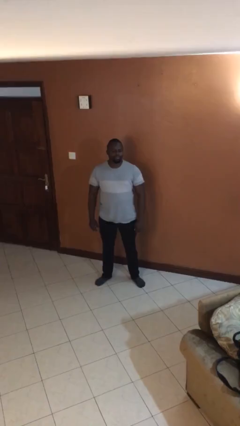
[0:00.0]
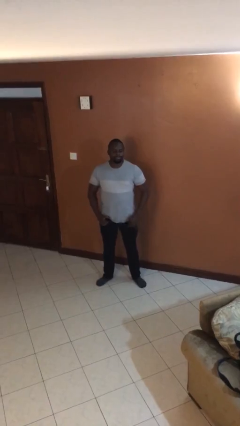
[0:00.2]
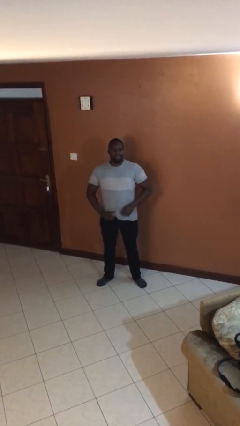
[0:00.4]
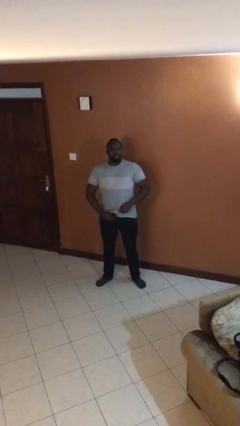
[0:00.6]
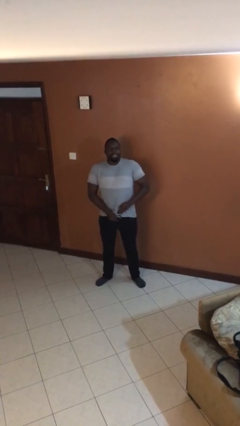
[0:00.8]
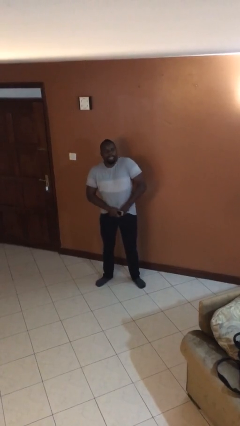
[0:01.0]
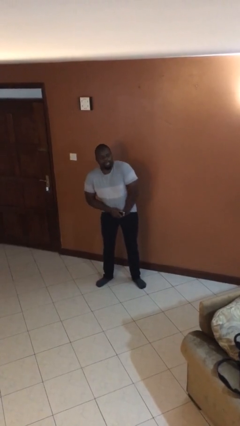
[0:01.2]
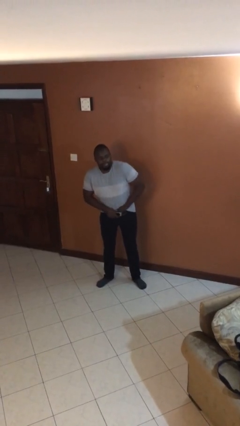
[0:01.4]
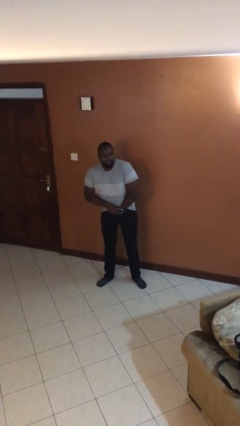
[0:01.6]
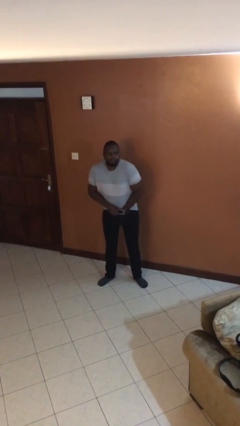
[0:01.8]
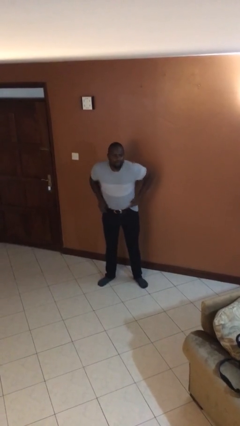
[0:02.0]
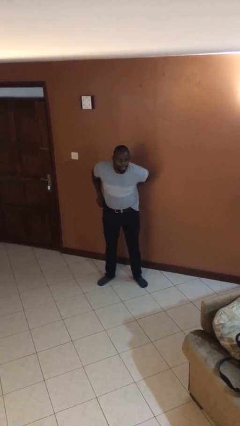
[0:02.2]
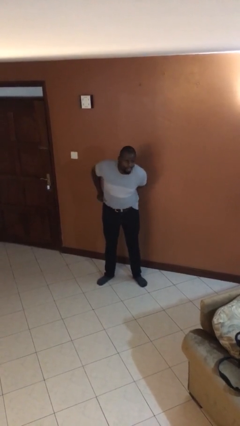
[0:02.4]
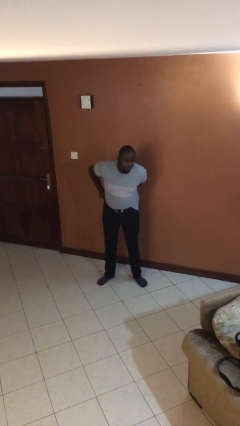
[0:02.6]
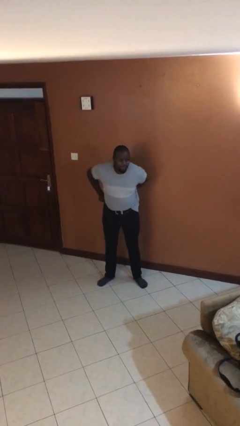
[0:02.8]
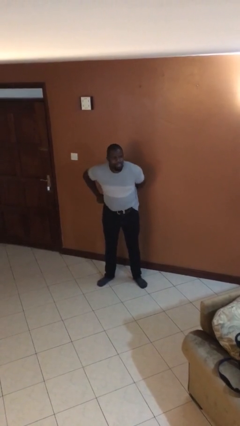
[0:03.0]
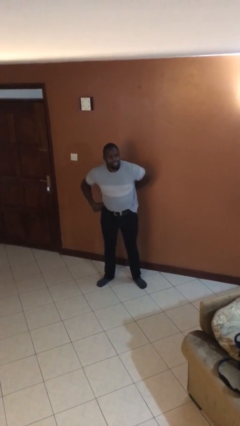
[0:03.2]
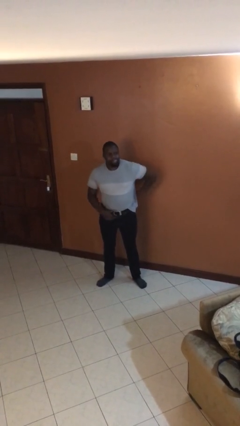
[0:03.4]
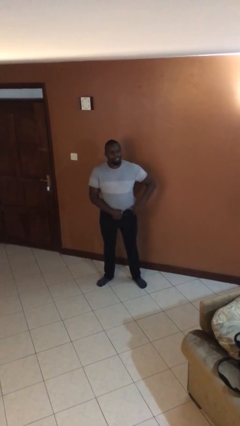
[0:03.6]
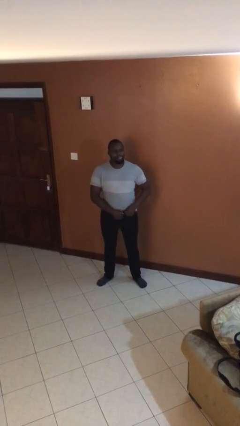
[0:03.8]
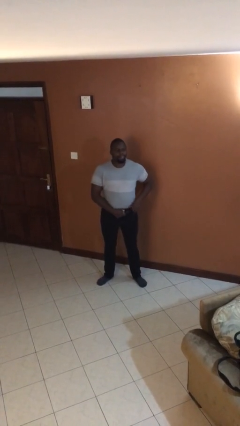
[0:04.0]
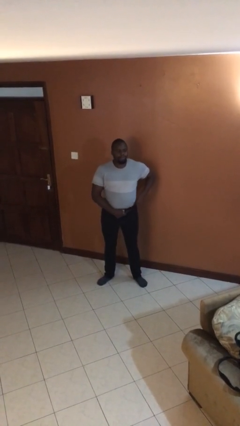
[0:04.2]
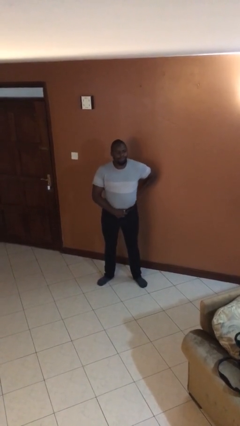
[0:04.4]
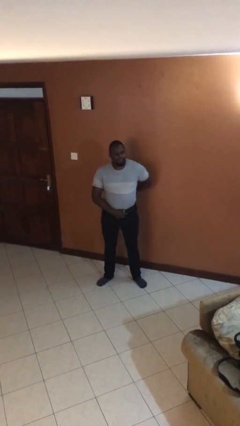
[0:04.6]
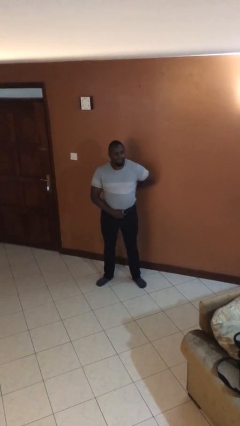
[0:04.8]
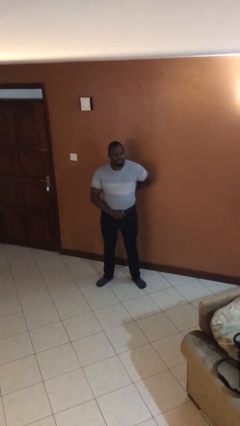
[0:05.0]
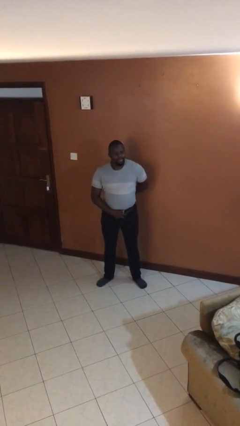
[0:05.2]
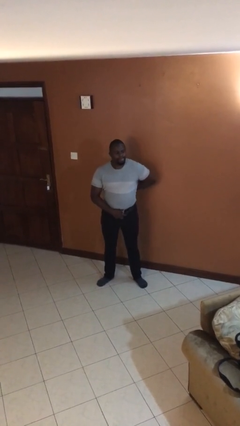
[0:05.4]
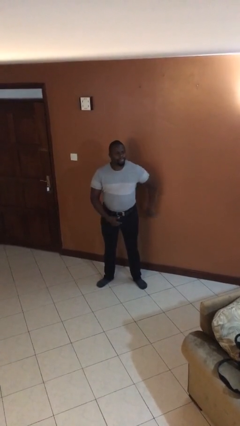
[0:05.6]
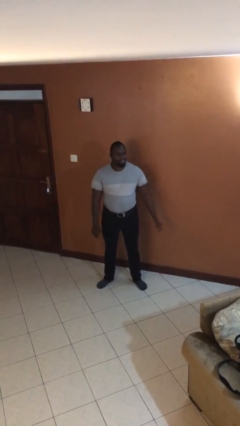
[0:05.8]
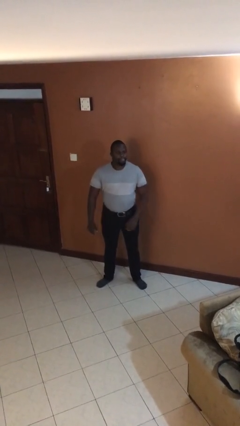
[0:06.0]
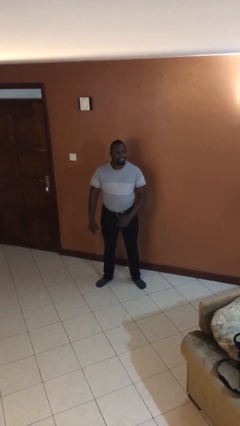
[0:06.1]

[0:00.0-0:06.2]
person tucks in shirt

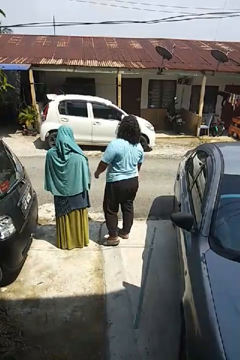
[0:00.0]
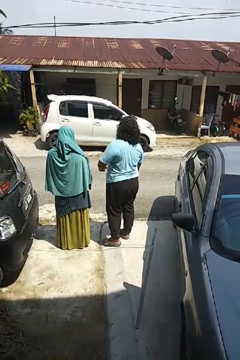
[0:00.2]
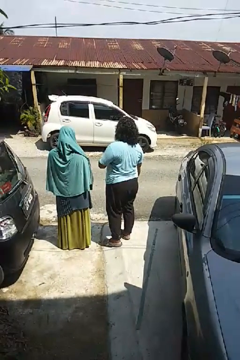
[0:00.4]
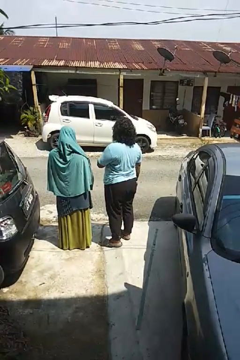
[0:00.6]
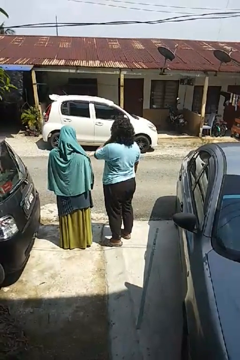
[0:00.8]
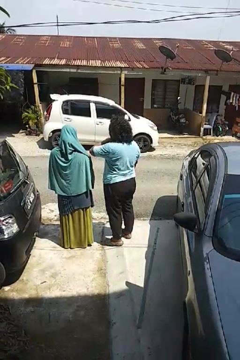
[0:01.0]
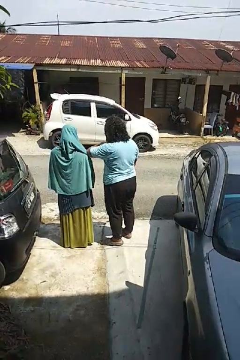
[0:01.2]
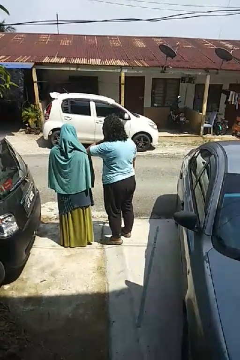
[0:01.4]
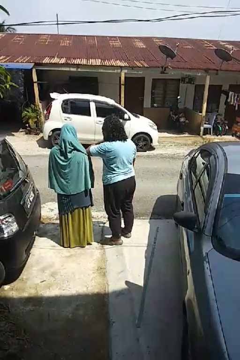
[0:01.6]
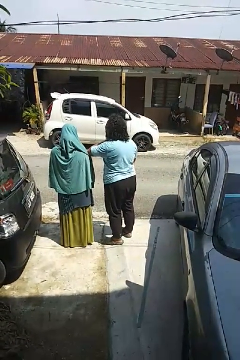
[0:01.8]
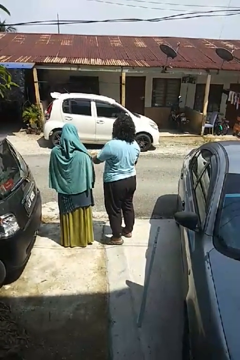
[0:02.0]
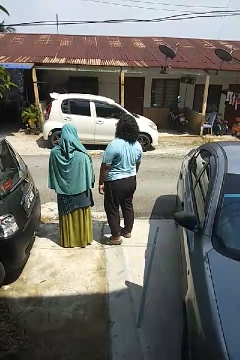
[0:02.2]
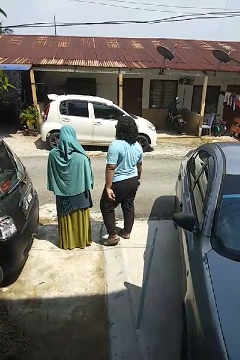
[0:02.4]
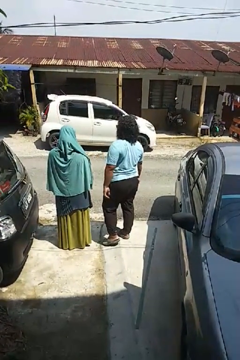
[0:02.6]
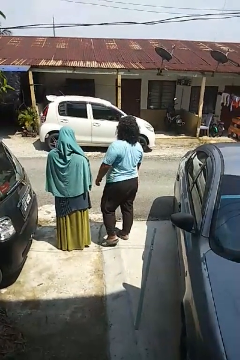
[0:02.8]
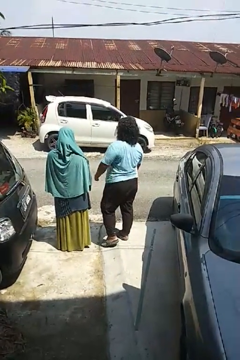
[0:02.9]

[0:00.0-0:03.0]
person nudges person with elbow

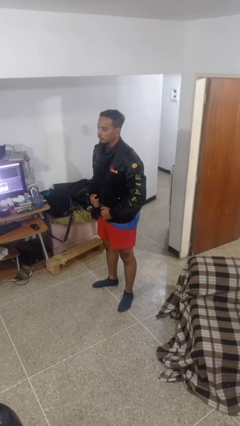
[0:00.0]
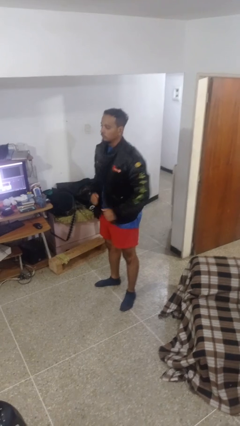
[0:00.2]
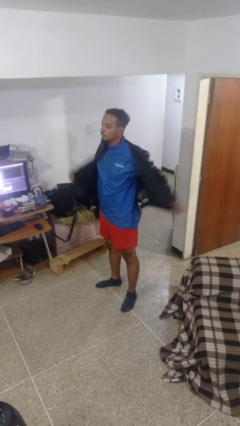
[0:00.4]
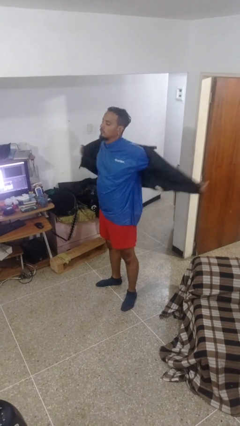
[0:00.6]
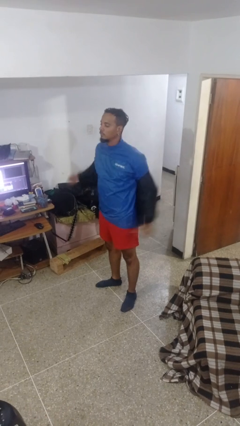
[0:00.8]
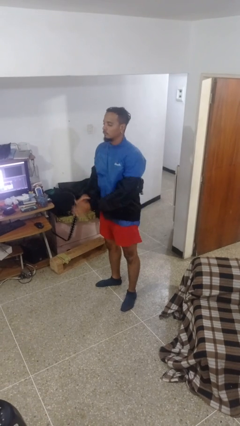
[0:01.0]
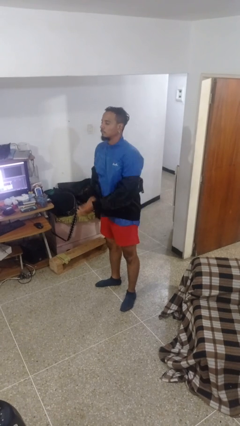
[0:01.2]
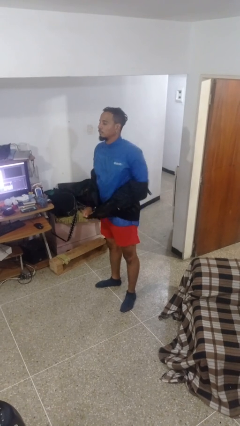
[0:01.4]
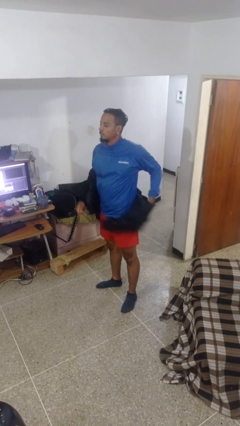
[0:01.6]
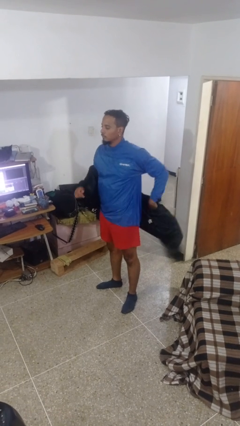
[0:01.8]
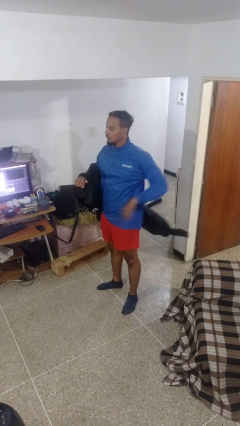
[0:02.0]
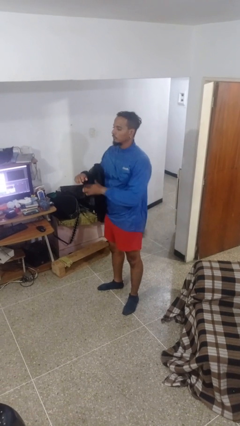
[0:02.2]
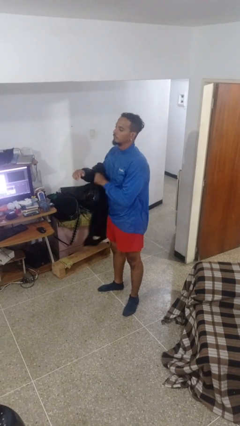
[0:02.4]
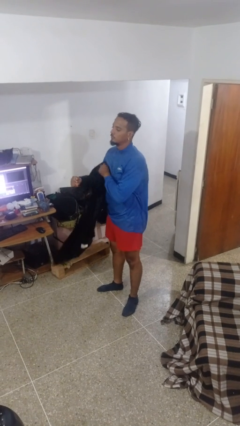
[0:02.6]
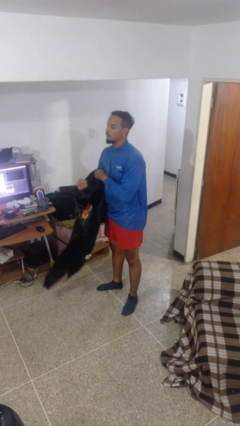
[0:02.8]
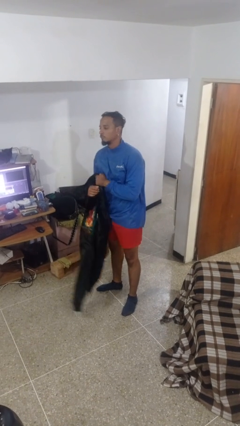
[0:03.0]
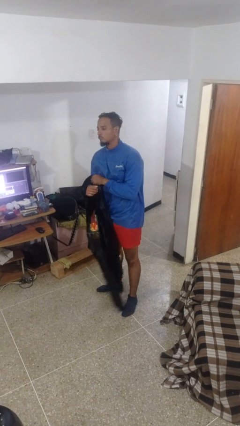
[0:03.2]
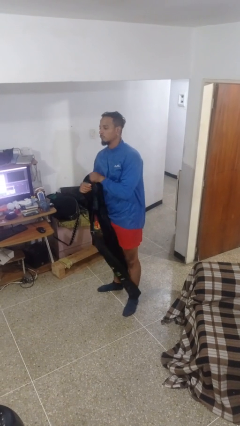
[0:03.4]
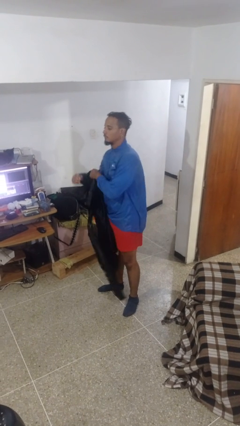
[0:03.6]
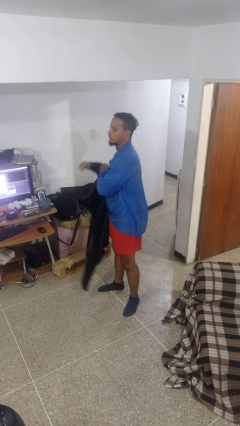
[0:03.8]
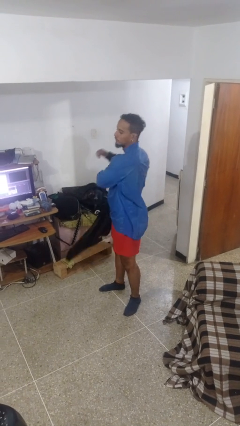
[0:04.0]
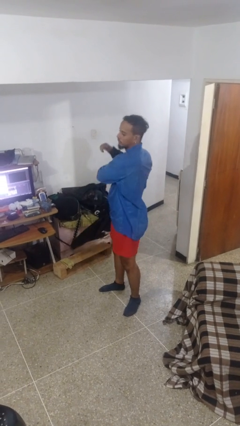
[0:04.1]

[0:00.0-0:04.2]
person takes off jacket

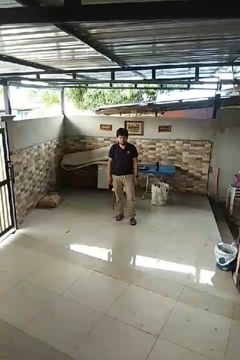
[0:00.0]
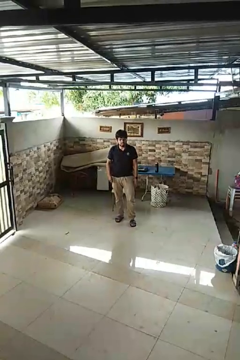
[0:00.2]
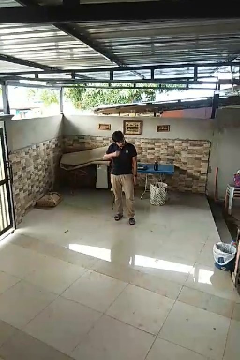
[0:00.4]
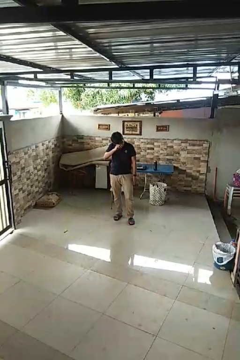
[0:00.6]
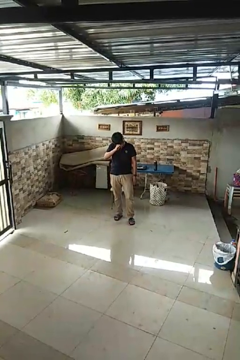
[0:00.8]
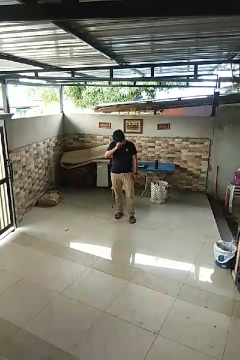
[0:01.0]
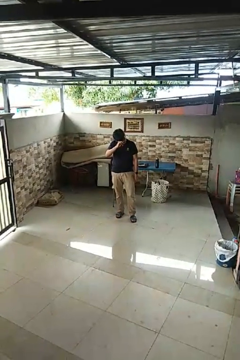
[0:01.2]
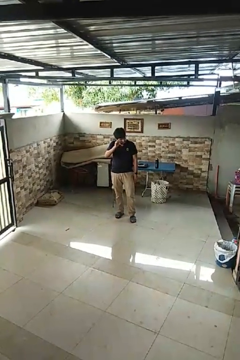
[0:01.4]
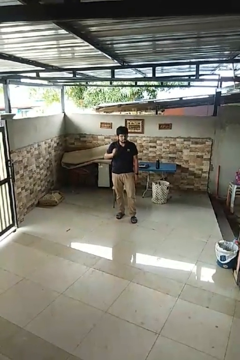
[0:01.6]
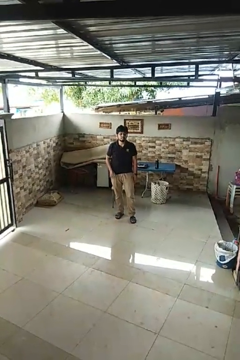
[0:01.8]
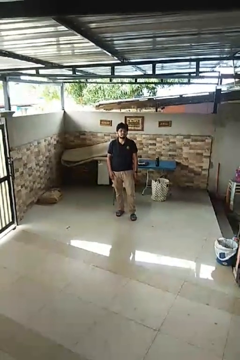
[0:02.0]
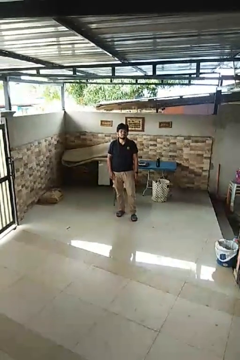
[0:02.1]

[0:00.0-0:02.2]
person scratches face

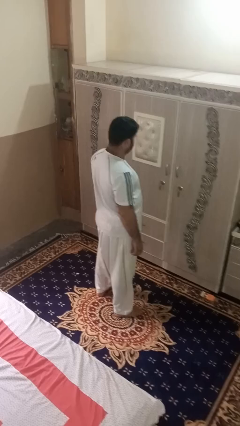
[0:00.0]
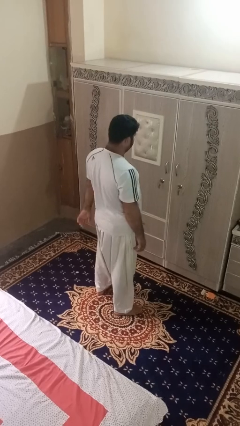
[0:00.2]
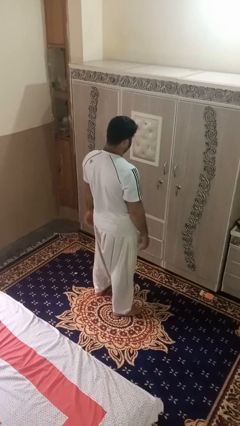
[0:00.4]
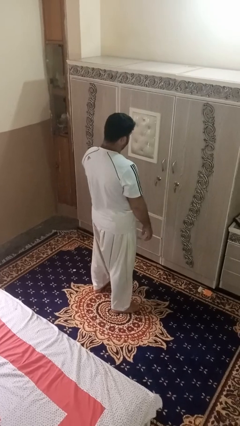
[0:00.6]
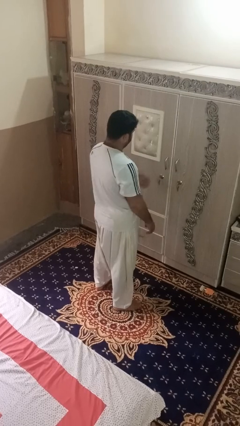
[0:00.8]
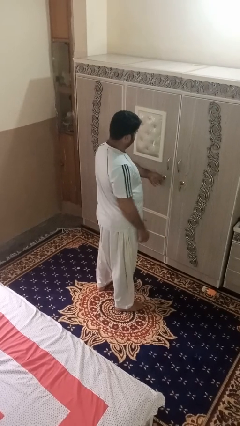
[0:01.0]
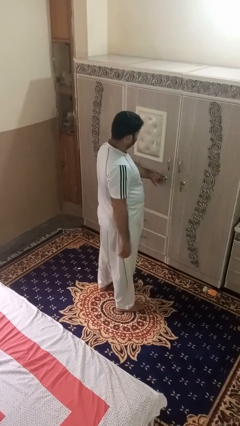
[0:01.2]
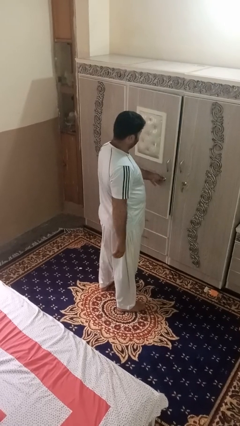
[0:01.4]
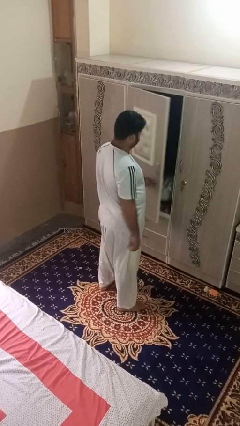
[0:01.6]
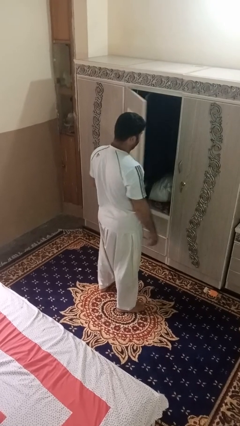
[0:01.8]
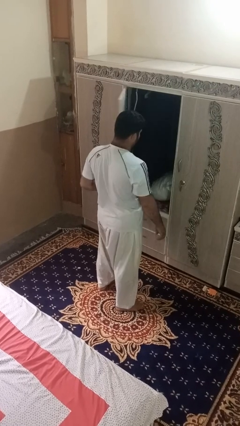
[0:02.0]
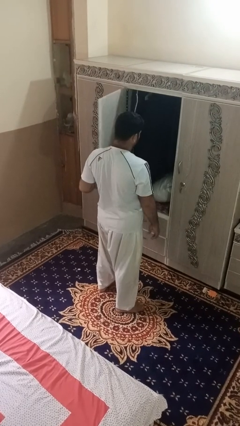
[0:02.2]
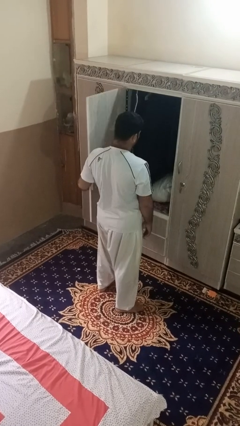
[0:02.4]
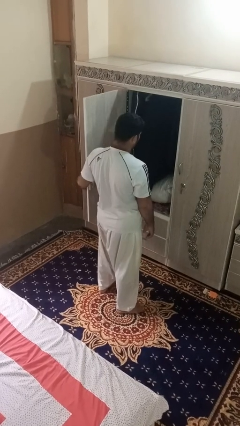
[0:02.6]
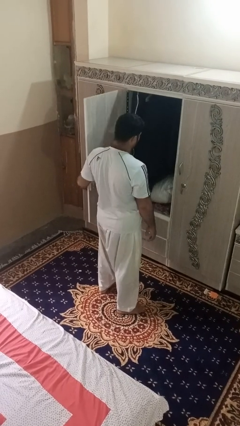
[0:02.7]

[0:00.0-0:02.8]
person opens dresser drawer

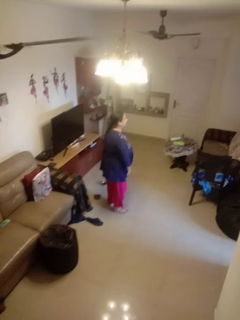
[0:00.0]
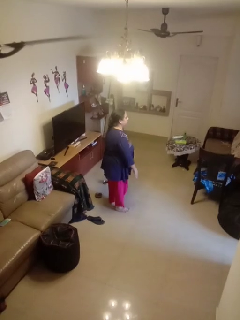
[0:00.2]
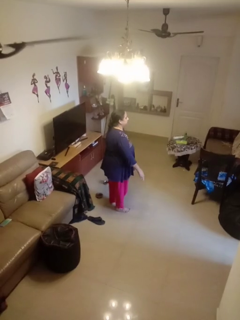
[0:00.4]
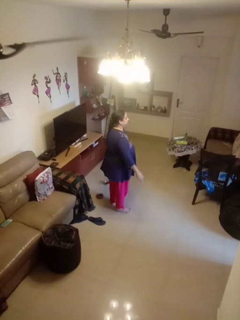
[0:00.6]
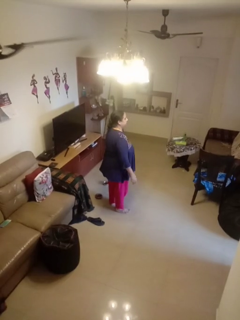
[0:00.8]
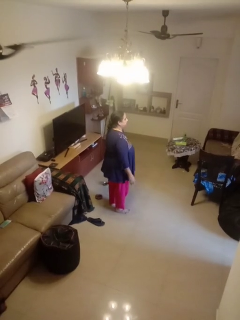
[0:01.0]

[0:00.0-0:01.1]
person slaps hands on thighs
